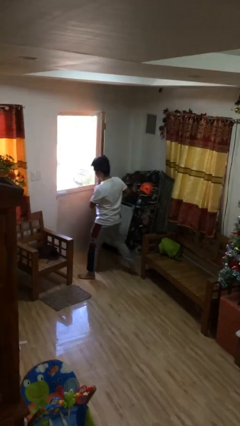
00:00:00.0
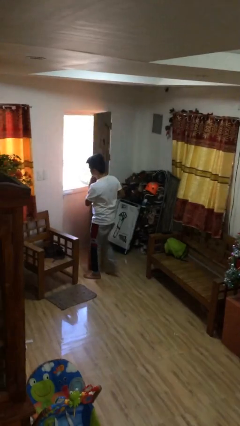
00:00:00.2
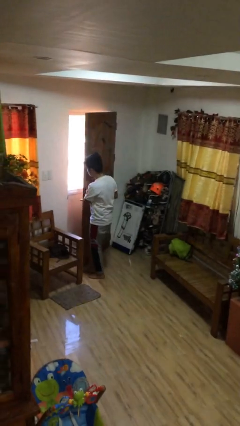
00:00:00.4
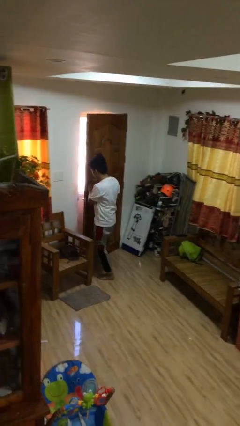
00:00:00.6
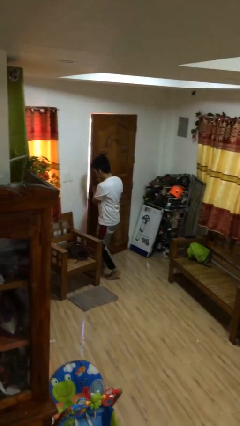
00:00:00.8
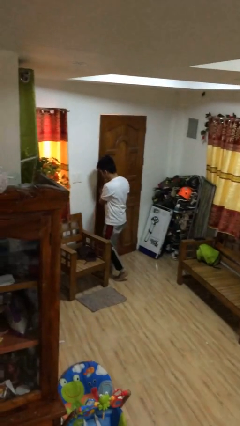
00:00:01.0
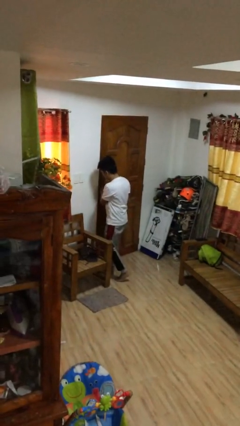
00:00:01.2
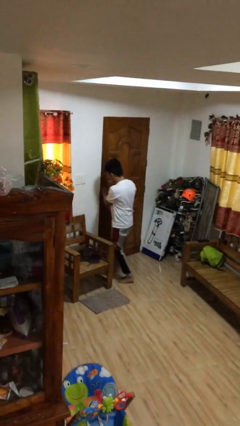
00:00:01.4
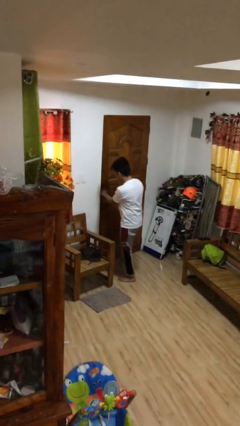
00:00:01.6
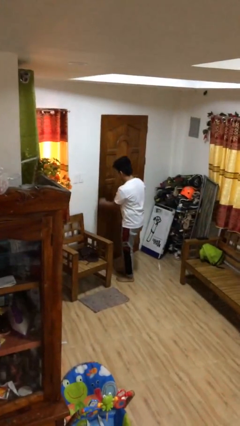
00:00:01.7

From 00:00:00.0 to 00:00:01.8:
person closes facility door

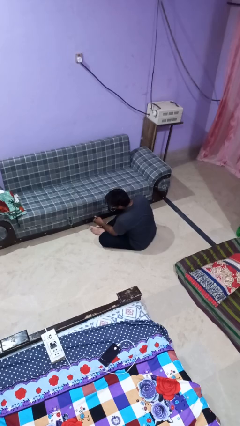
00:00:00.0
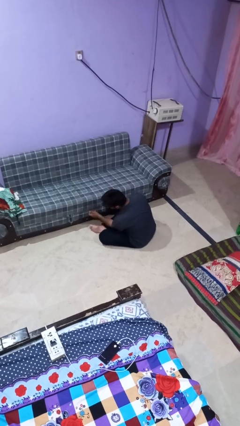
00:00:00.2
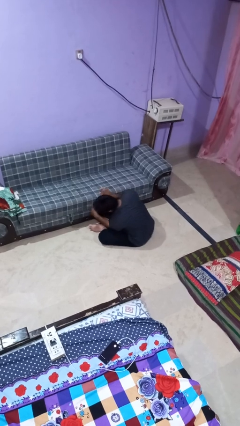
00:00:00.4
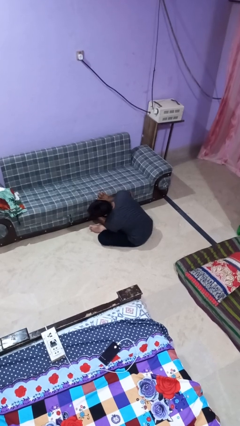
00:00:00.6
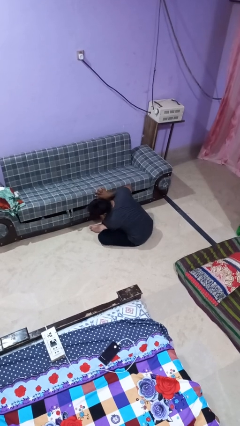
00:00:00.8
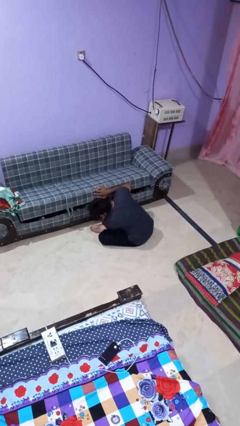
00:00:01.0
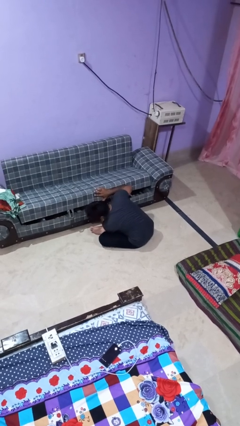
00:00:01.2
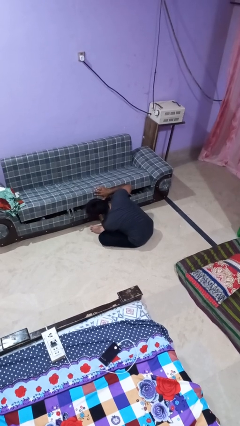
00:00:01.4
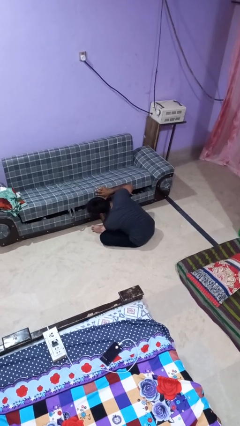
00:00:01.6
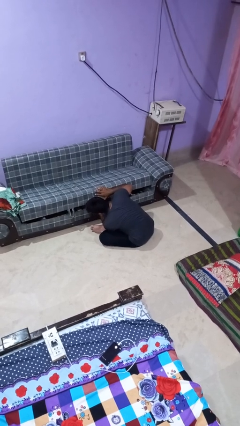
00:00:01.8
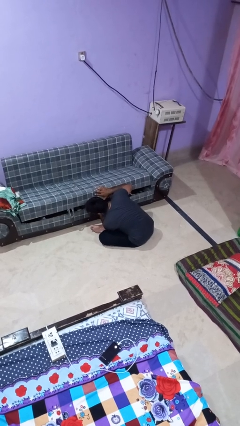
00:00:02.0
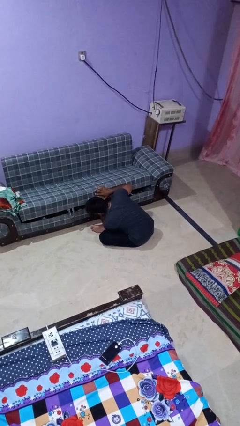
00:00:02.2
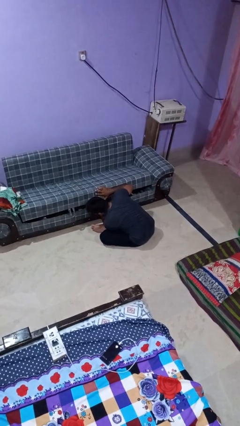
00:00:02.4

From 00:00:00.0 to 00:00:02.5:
person searches under couch

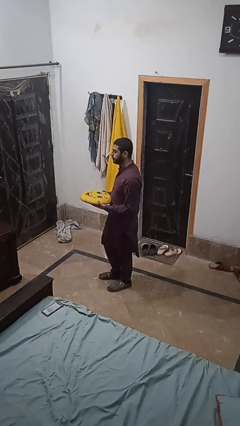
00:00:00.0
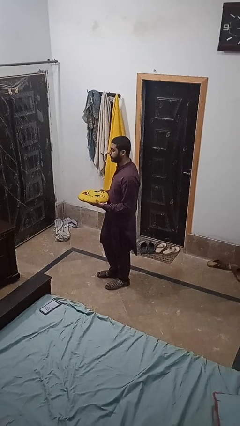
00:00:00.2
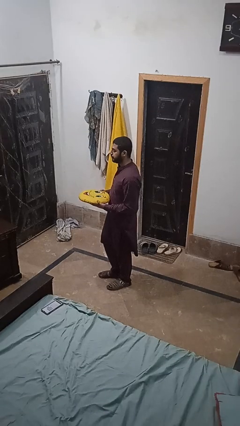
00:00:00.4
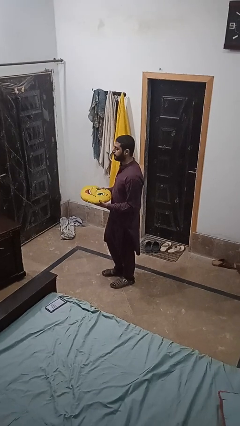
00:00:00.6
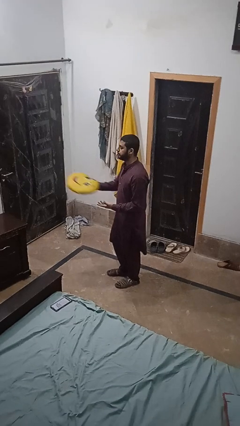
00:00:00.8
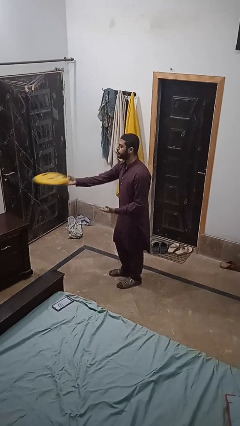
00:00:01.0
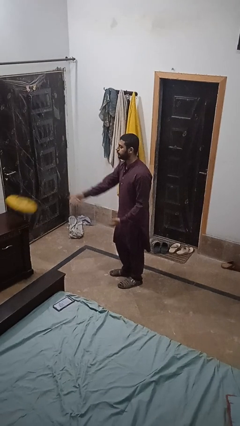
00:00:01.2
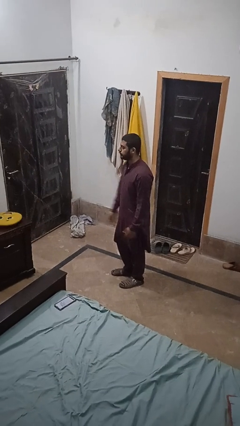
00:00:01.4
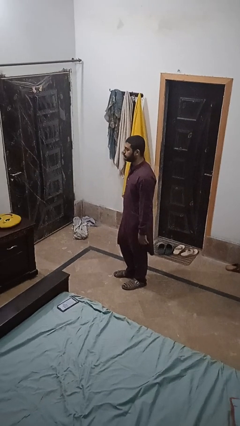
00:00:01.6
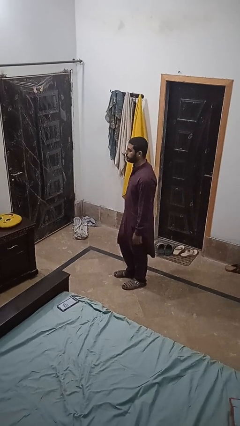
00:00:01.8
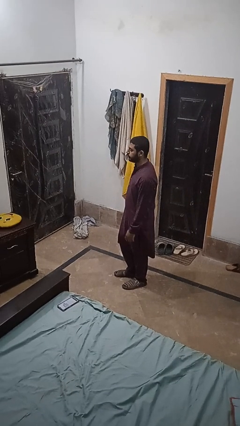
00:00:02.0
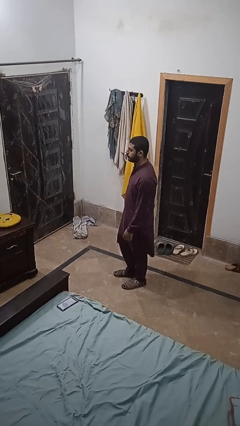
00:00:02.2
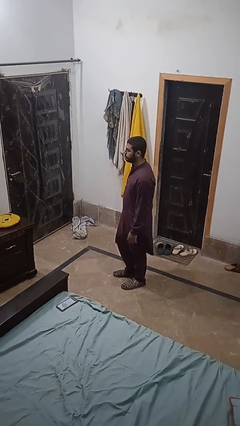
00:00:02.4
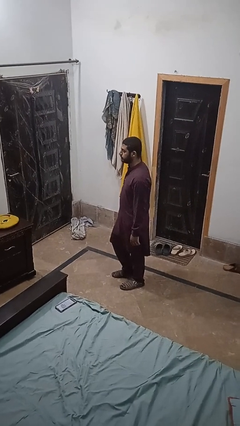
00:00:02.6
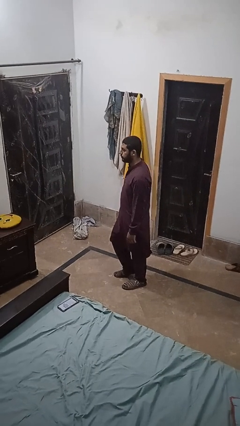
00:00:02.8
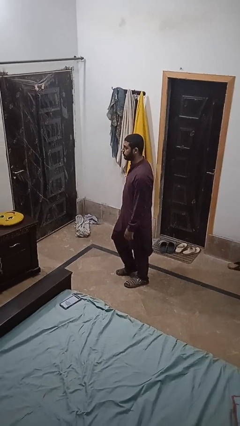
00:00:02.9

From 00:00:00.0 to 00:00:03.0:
person throws object on table

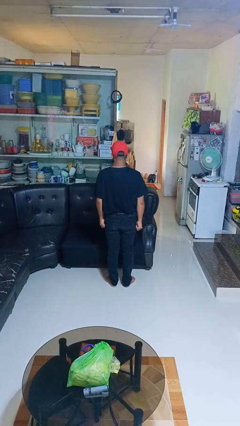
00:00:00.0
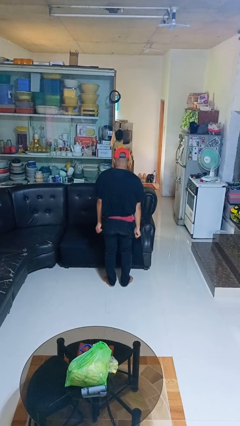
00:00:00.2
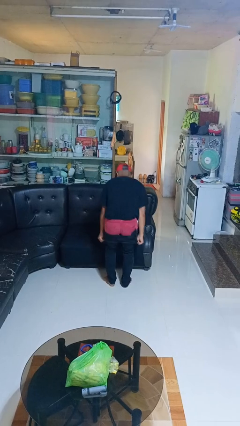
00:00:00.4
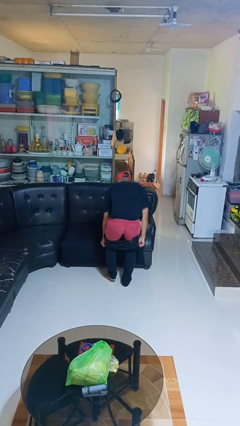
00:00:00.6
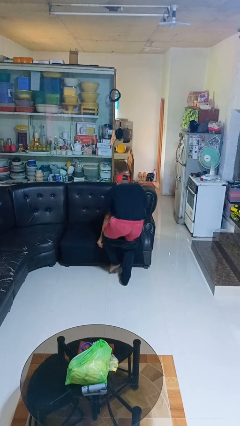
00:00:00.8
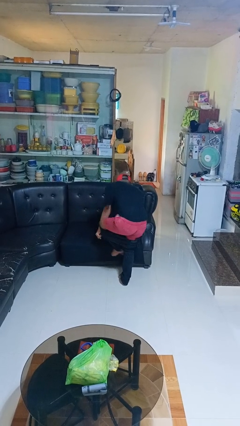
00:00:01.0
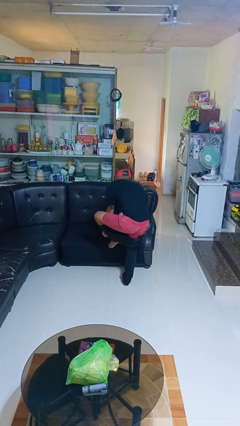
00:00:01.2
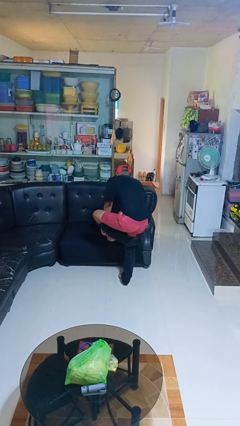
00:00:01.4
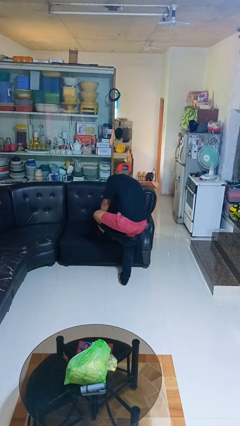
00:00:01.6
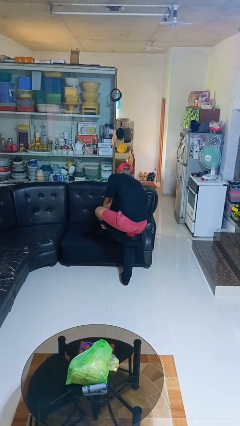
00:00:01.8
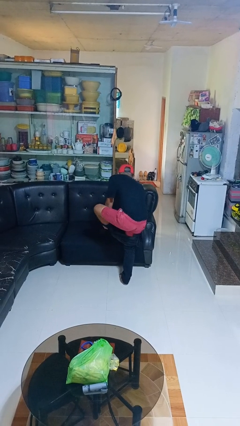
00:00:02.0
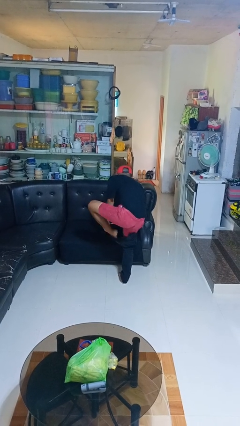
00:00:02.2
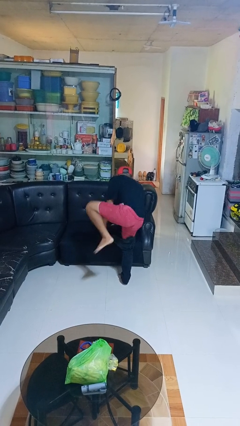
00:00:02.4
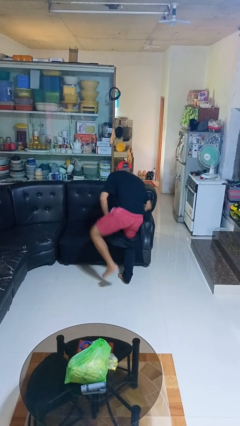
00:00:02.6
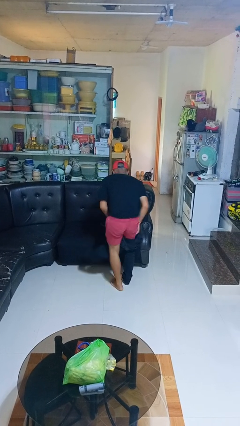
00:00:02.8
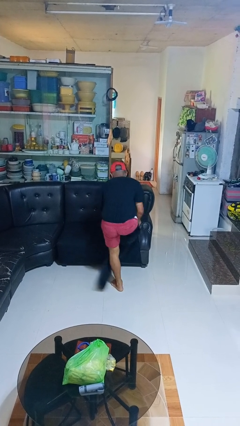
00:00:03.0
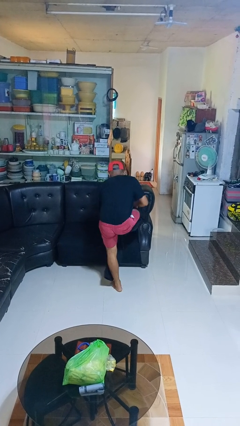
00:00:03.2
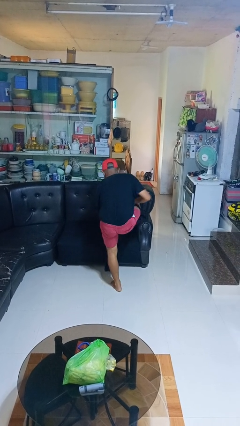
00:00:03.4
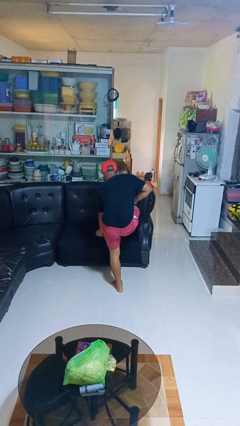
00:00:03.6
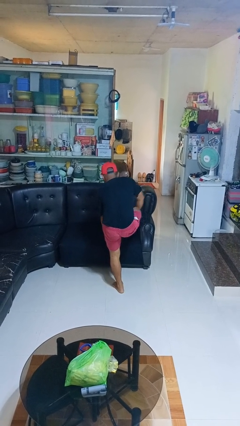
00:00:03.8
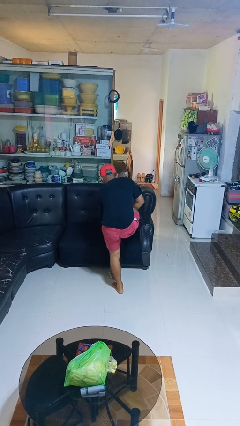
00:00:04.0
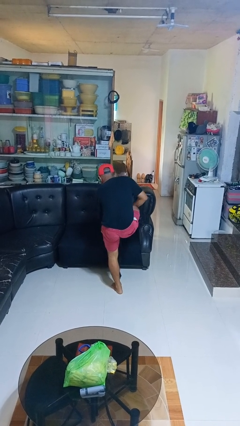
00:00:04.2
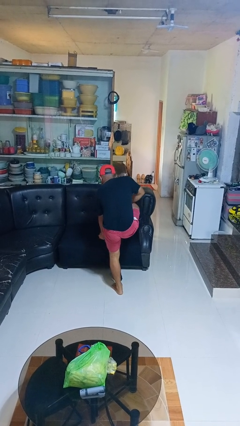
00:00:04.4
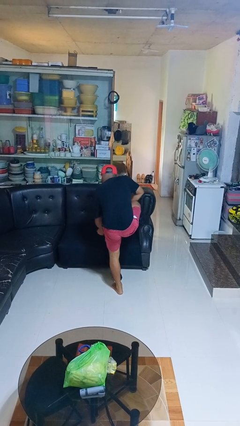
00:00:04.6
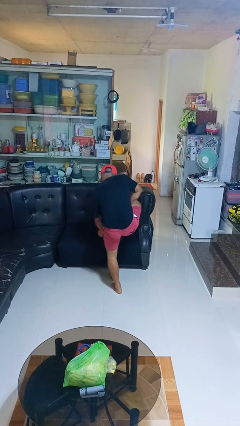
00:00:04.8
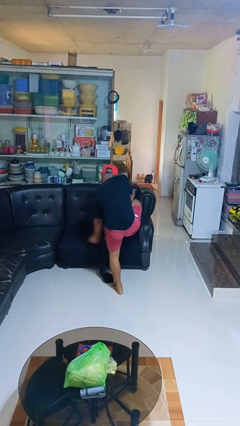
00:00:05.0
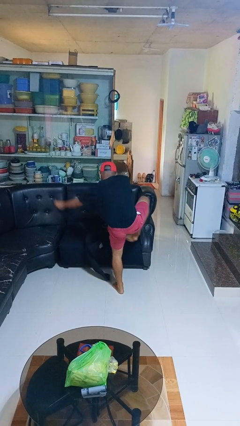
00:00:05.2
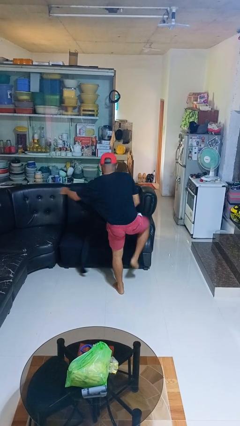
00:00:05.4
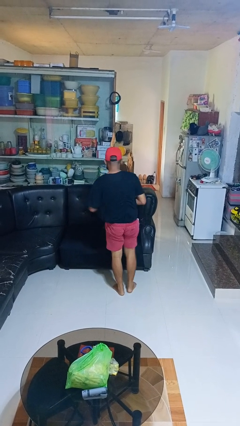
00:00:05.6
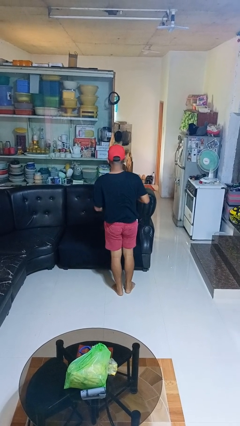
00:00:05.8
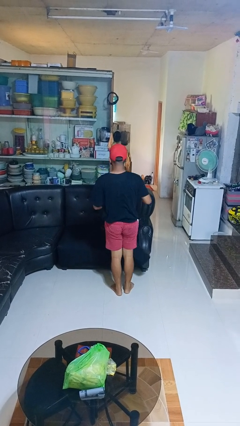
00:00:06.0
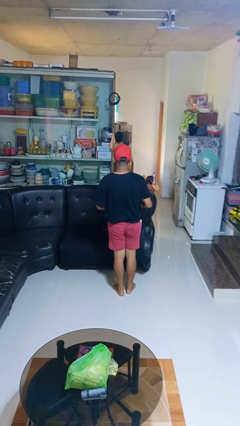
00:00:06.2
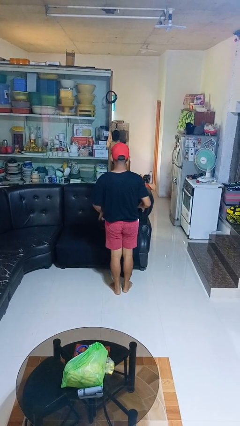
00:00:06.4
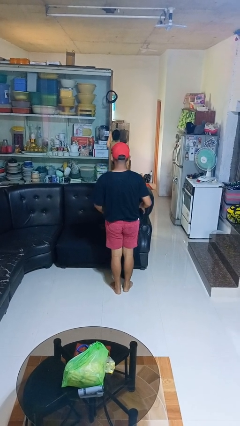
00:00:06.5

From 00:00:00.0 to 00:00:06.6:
person takes off pants

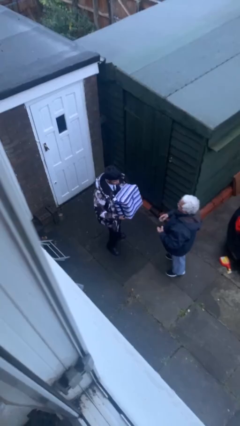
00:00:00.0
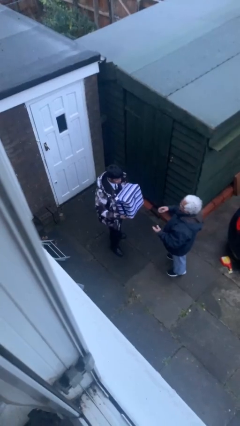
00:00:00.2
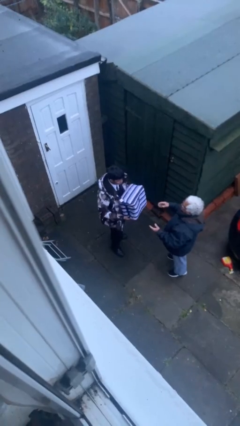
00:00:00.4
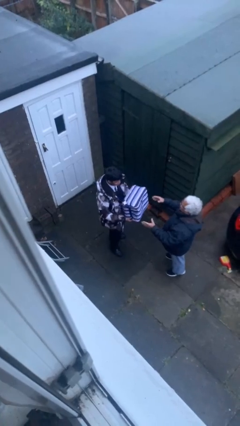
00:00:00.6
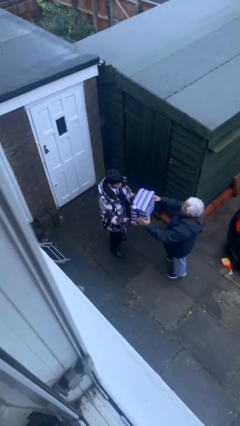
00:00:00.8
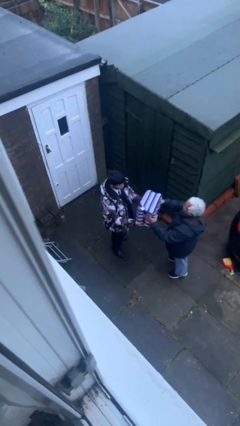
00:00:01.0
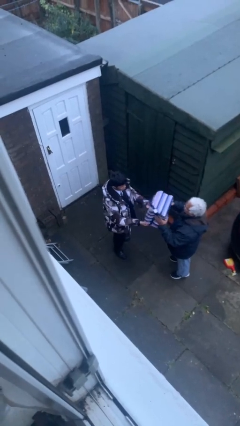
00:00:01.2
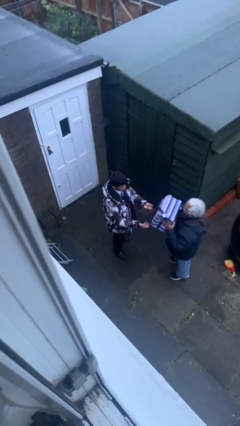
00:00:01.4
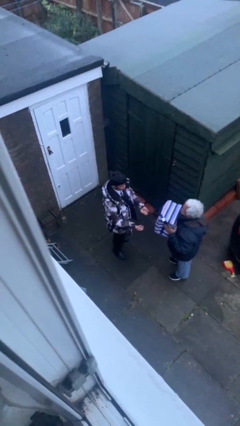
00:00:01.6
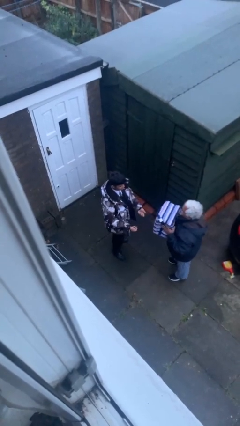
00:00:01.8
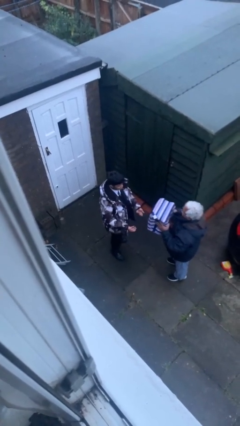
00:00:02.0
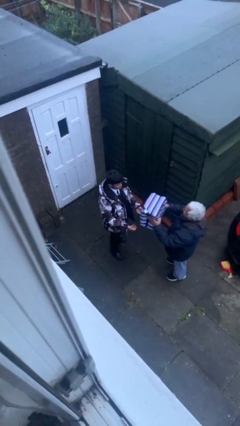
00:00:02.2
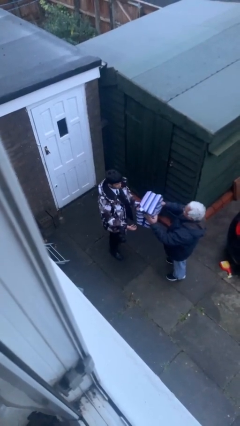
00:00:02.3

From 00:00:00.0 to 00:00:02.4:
person transfers object to person

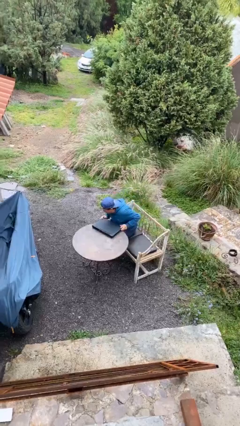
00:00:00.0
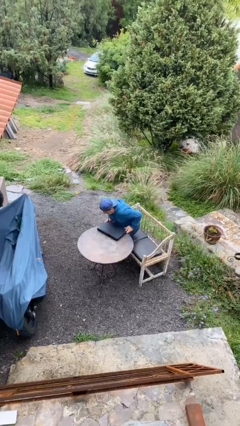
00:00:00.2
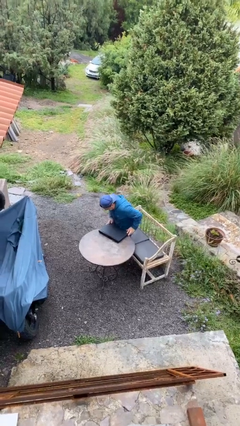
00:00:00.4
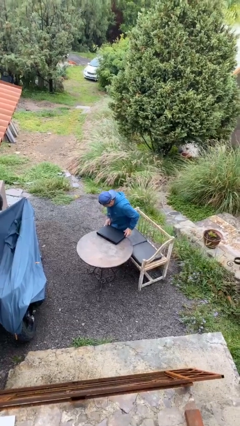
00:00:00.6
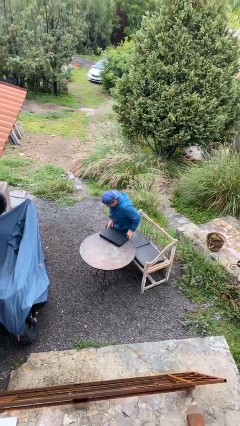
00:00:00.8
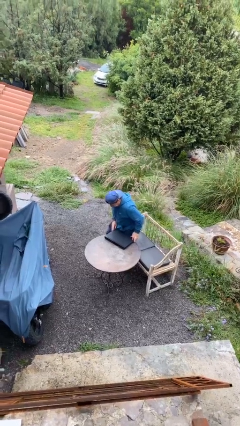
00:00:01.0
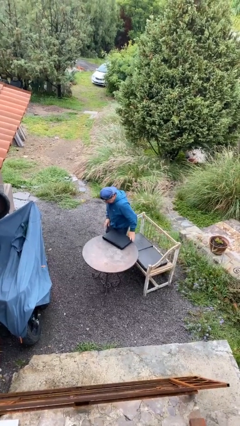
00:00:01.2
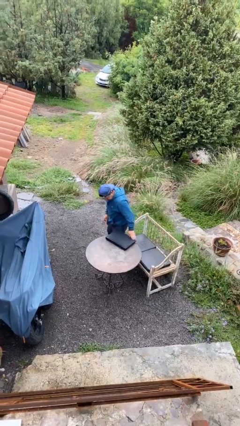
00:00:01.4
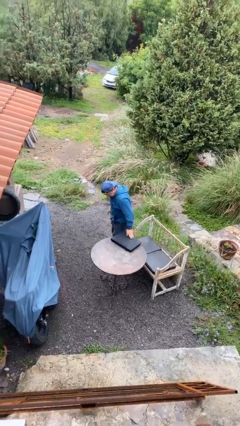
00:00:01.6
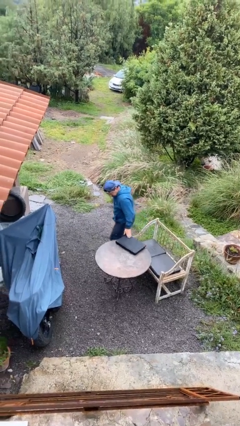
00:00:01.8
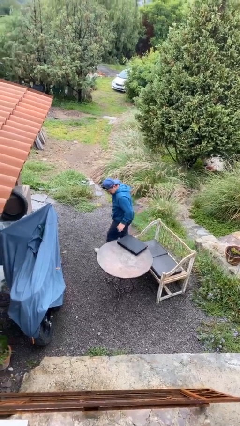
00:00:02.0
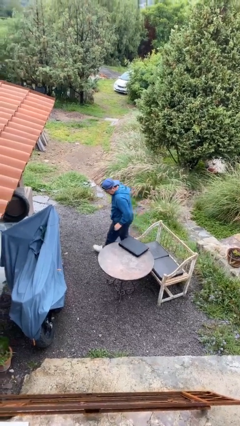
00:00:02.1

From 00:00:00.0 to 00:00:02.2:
person stands up
